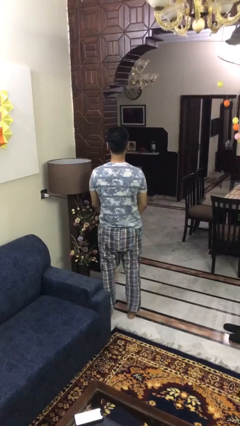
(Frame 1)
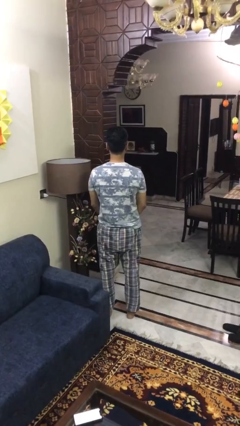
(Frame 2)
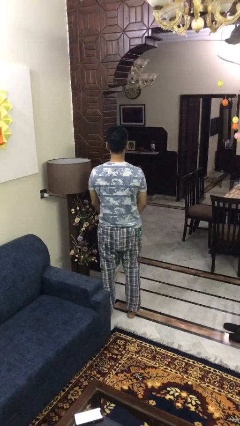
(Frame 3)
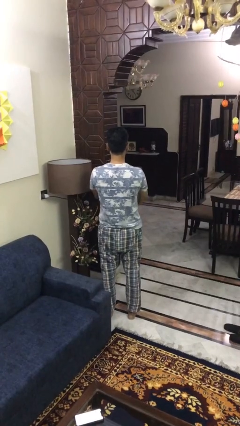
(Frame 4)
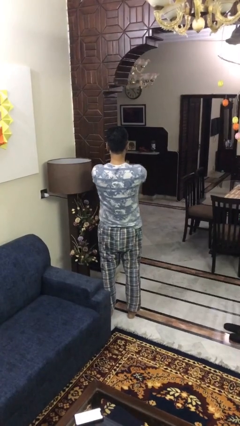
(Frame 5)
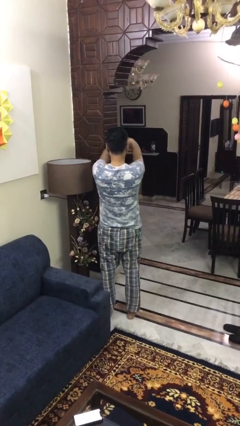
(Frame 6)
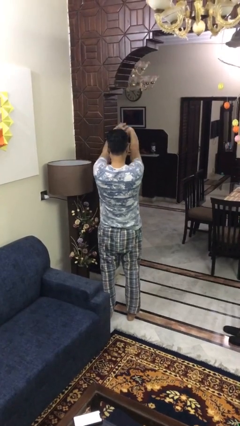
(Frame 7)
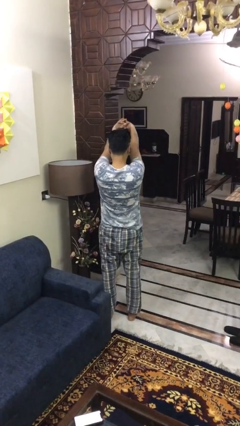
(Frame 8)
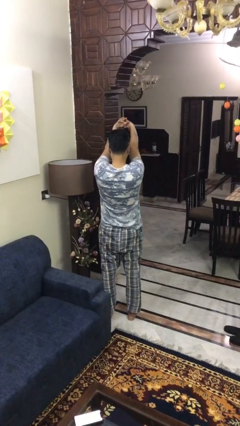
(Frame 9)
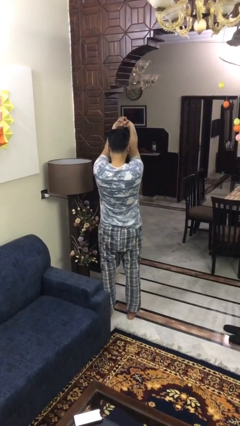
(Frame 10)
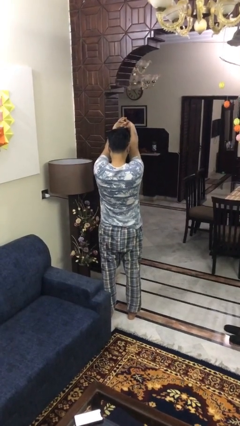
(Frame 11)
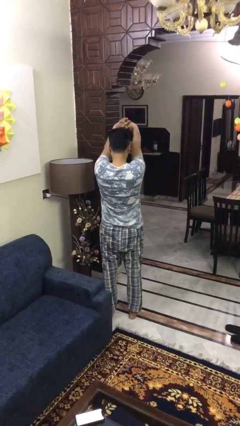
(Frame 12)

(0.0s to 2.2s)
person cracks knuckles

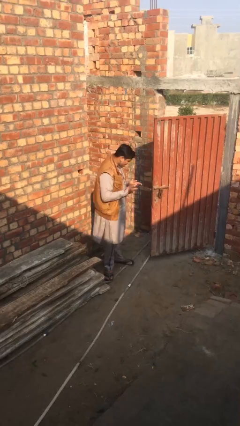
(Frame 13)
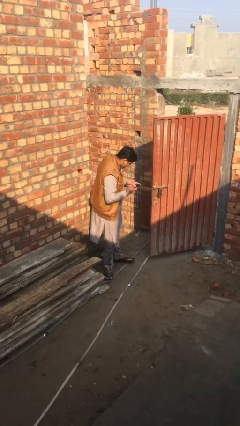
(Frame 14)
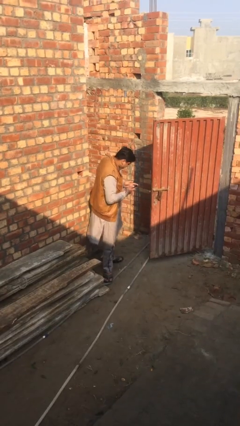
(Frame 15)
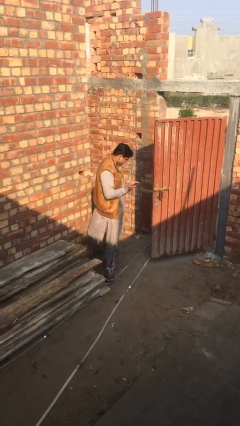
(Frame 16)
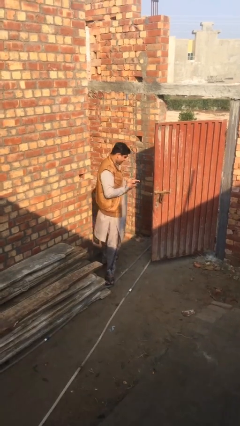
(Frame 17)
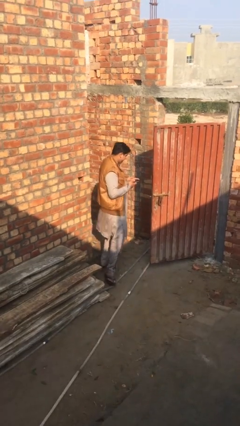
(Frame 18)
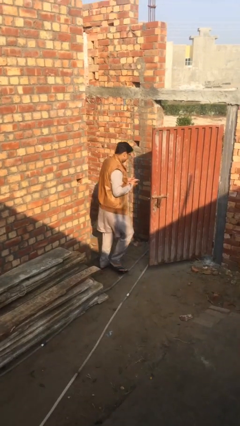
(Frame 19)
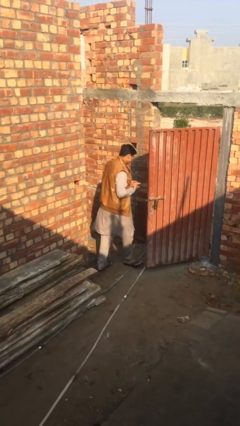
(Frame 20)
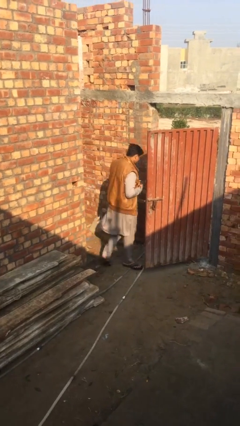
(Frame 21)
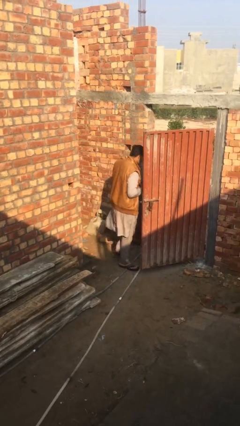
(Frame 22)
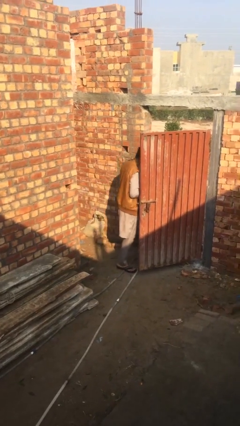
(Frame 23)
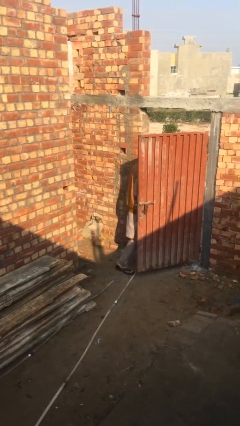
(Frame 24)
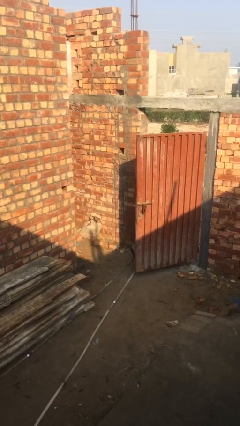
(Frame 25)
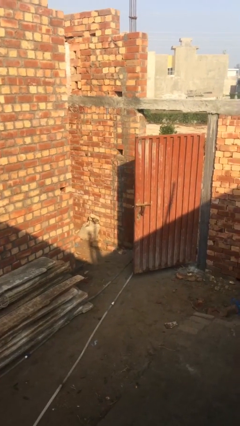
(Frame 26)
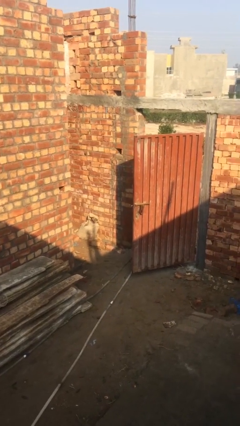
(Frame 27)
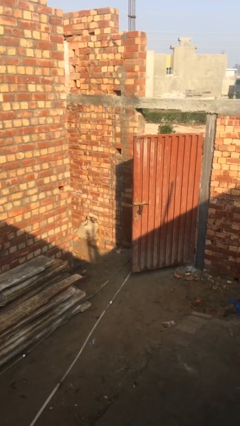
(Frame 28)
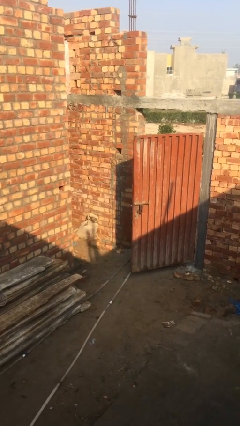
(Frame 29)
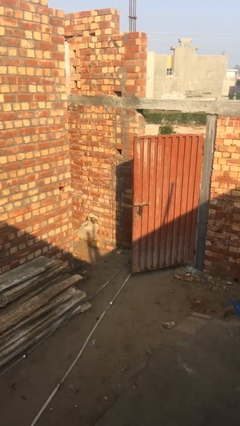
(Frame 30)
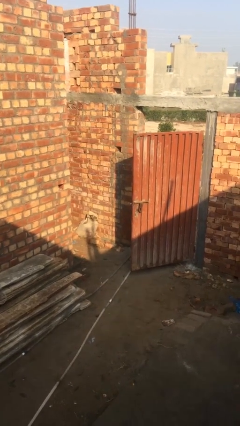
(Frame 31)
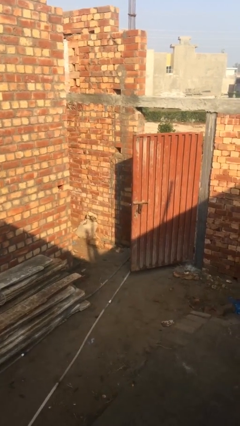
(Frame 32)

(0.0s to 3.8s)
person exits scene through structure

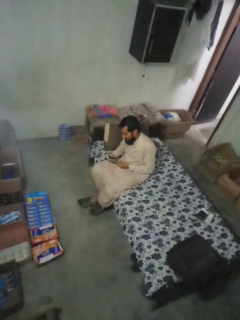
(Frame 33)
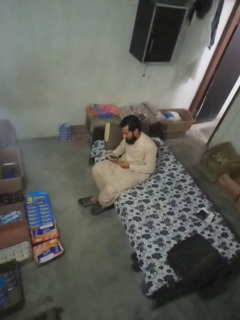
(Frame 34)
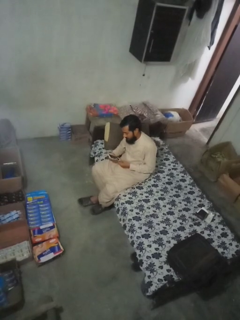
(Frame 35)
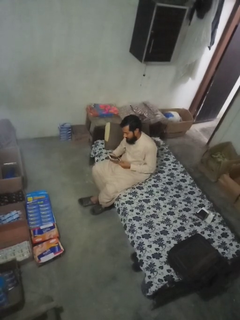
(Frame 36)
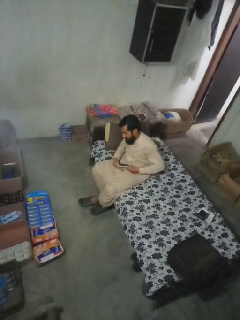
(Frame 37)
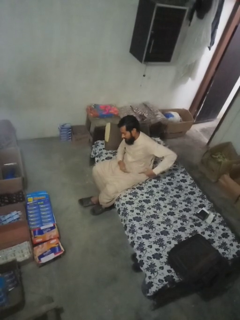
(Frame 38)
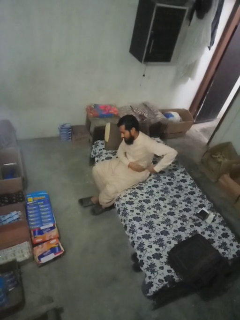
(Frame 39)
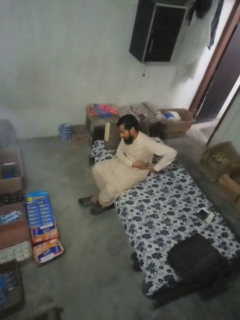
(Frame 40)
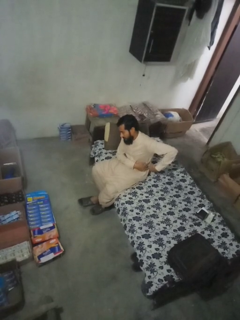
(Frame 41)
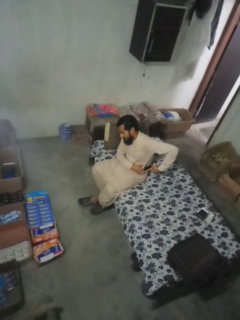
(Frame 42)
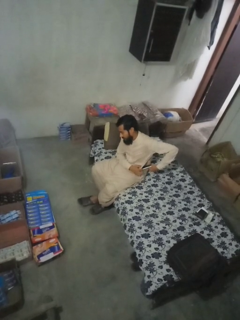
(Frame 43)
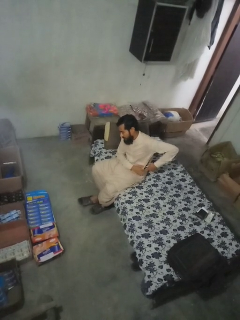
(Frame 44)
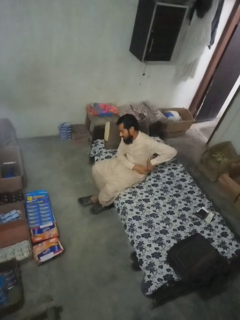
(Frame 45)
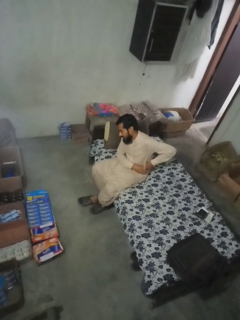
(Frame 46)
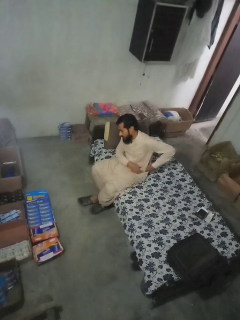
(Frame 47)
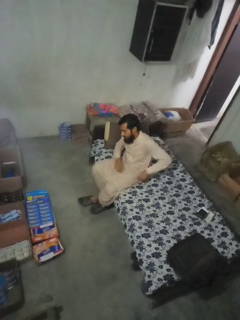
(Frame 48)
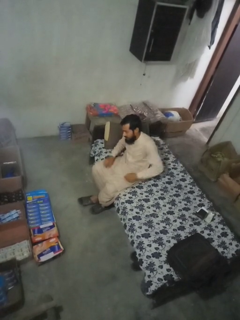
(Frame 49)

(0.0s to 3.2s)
person puts phone into pocket

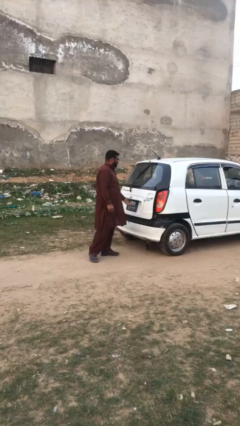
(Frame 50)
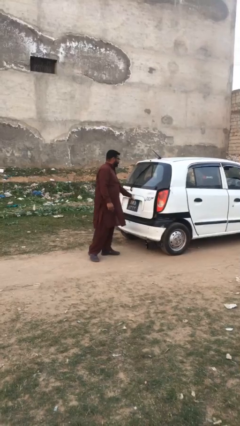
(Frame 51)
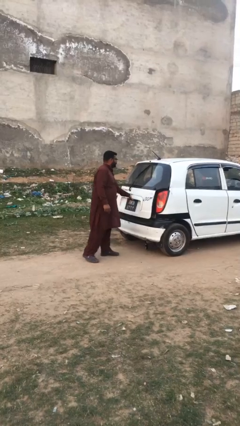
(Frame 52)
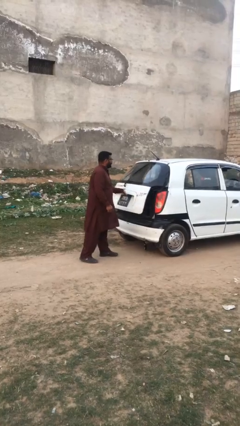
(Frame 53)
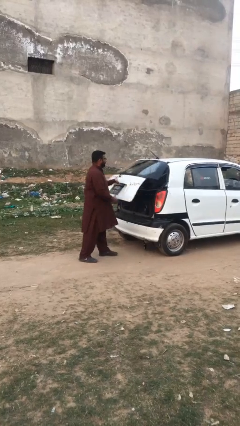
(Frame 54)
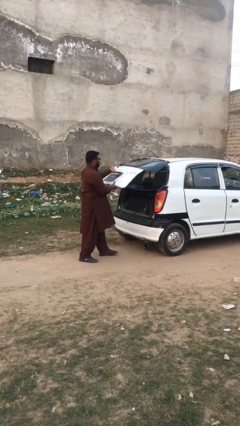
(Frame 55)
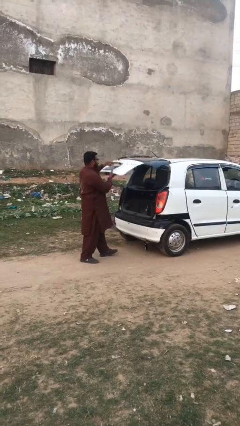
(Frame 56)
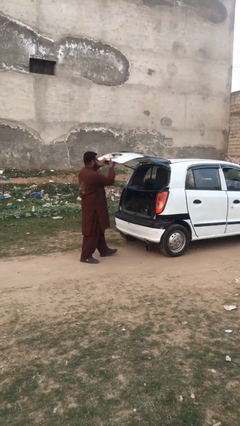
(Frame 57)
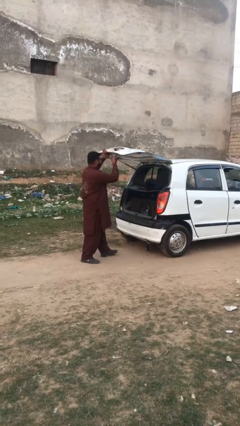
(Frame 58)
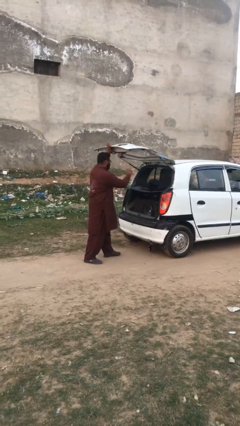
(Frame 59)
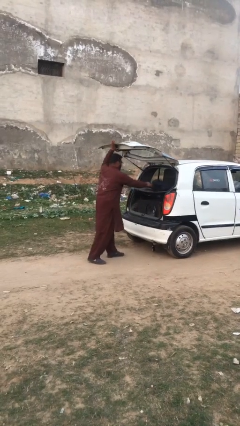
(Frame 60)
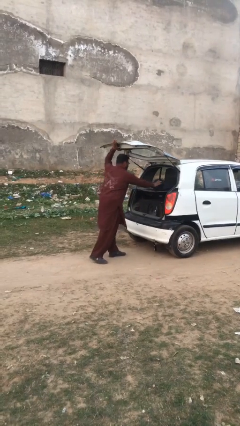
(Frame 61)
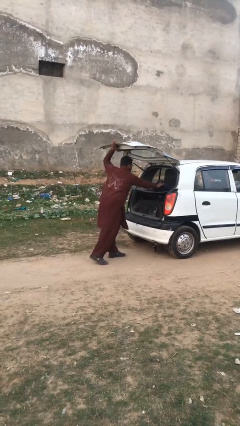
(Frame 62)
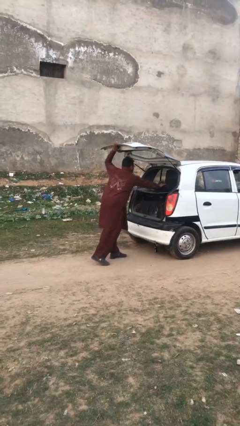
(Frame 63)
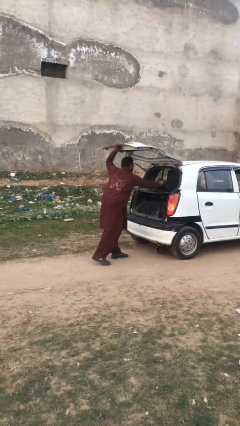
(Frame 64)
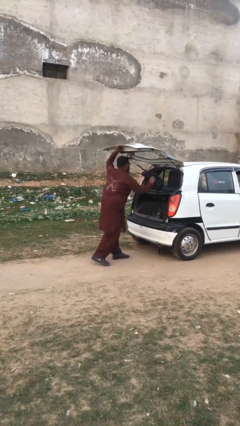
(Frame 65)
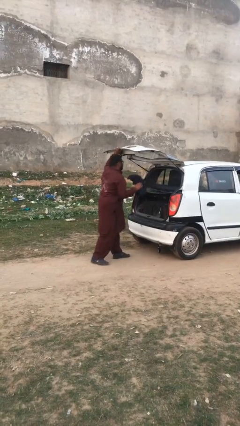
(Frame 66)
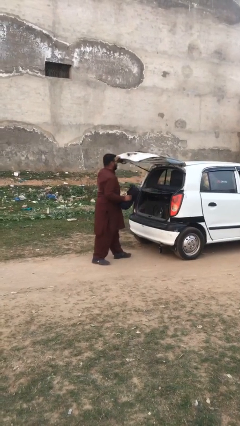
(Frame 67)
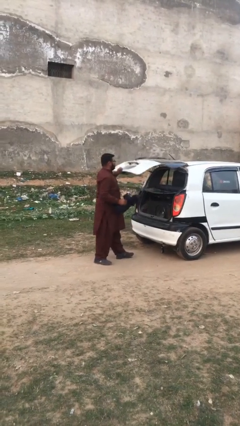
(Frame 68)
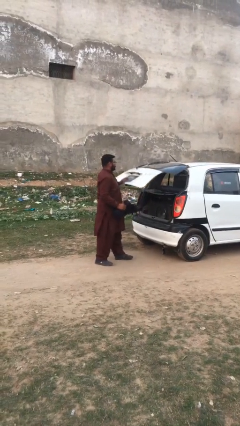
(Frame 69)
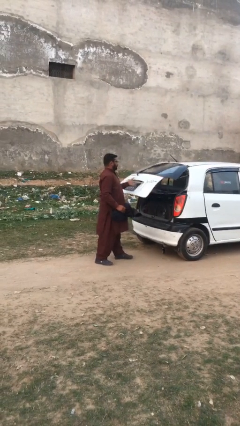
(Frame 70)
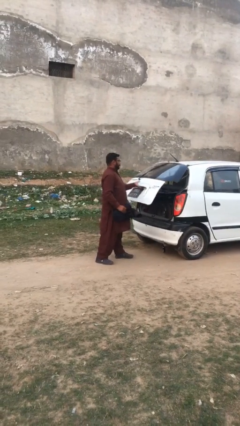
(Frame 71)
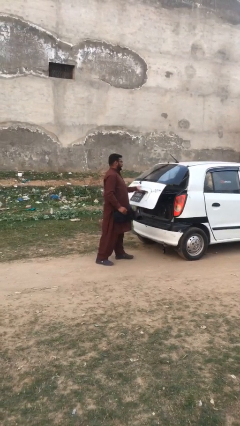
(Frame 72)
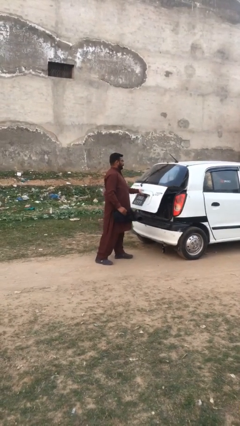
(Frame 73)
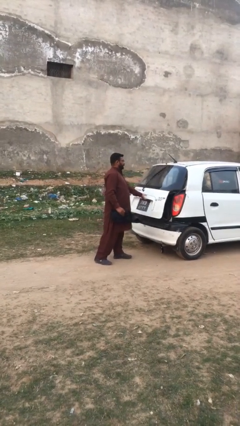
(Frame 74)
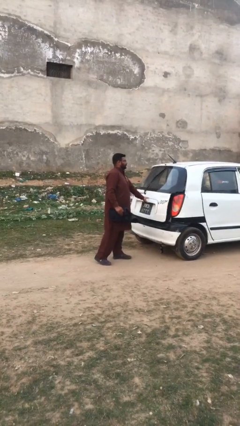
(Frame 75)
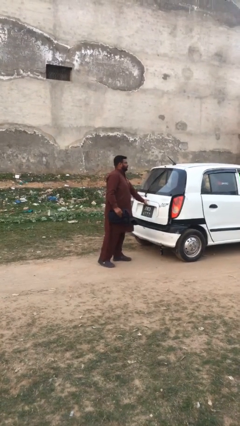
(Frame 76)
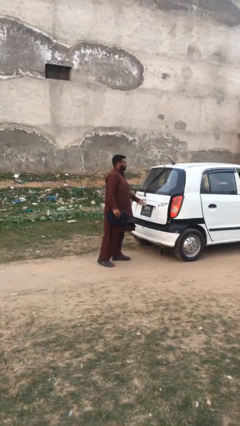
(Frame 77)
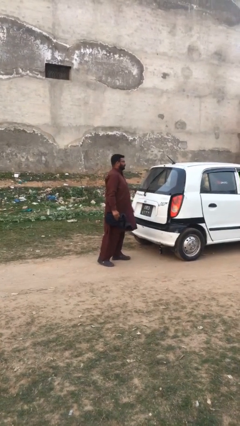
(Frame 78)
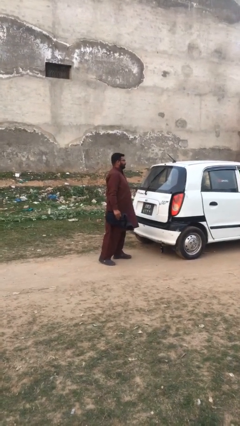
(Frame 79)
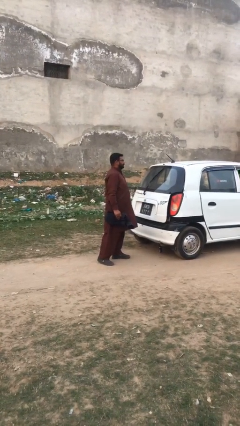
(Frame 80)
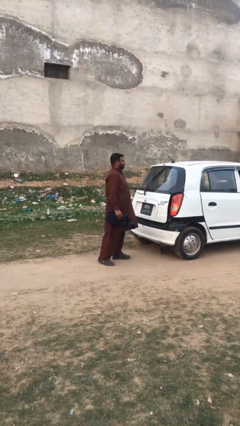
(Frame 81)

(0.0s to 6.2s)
person unloads car

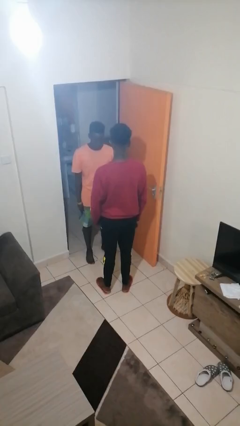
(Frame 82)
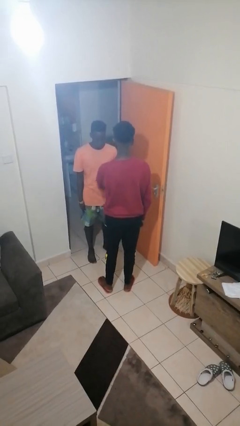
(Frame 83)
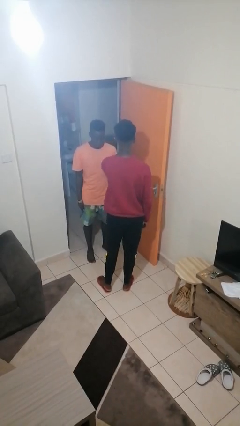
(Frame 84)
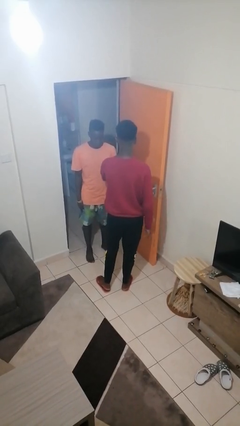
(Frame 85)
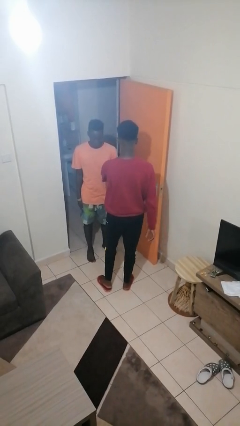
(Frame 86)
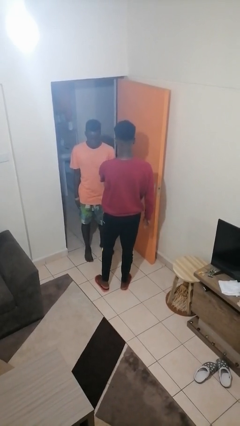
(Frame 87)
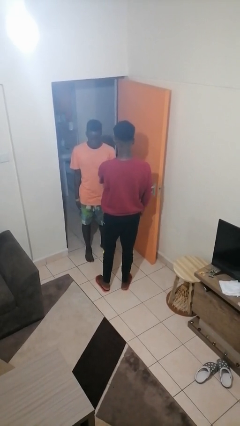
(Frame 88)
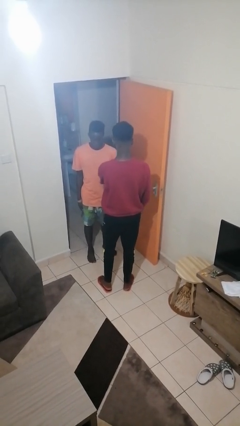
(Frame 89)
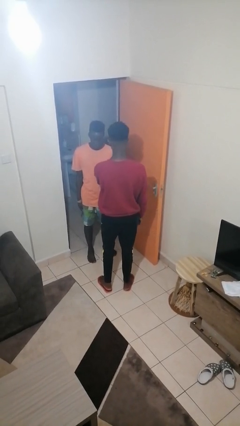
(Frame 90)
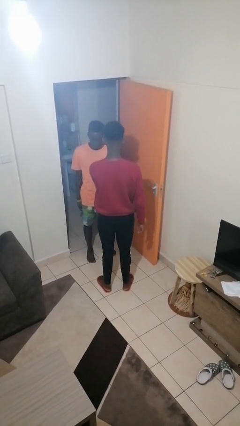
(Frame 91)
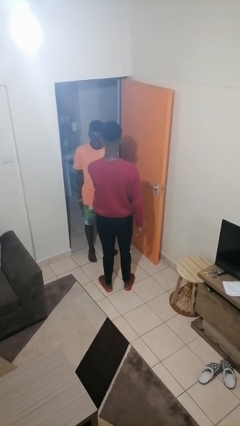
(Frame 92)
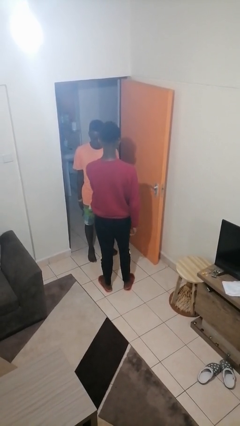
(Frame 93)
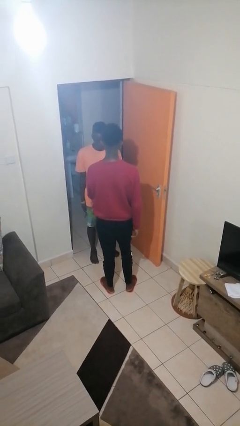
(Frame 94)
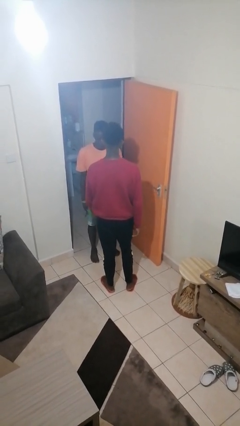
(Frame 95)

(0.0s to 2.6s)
person grabs person by bicep

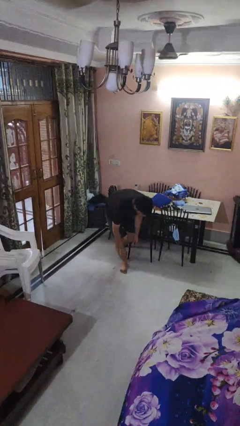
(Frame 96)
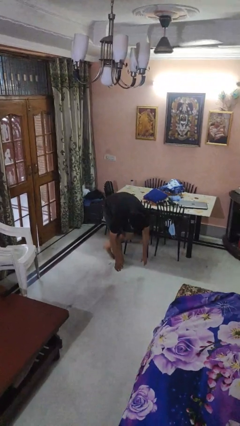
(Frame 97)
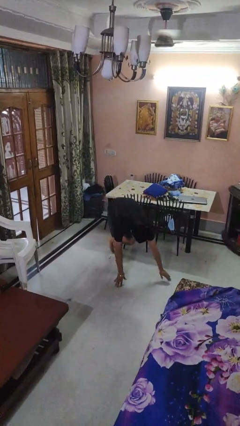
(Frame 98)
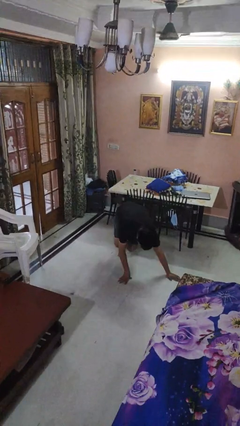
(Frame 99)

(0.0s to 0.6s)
person trips on object on floor
